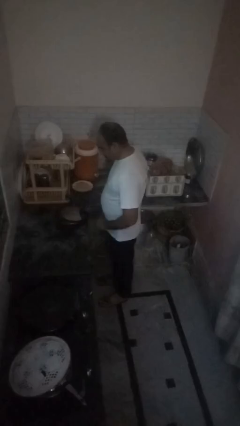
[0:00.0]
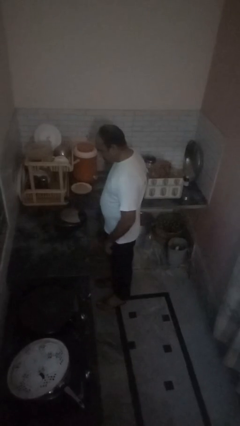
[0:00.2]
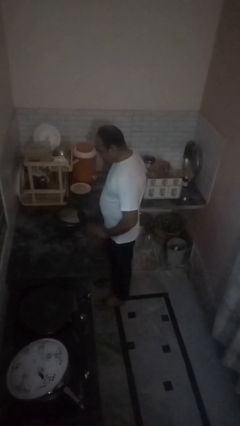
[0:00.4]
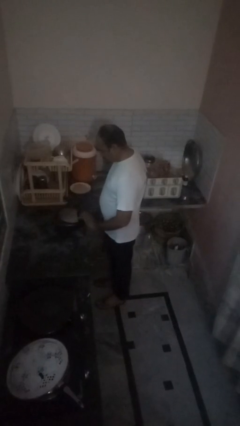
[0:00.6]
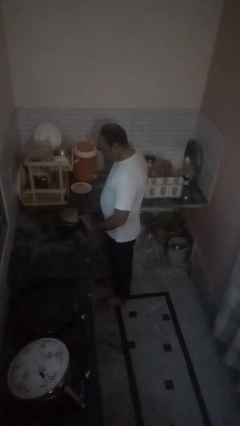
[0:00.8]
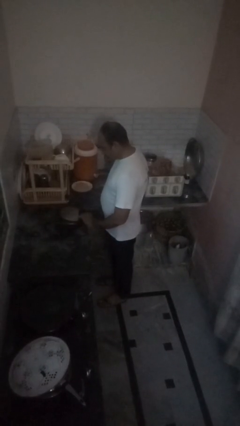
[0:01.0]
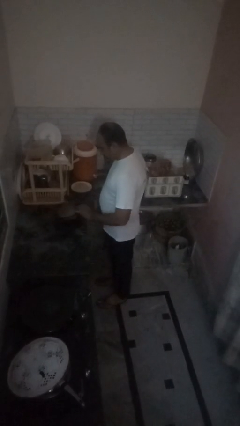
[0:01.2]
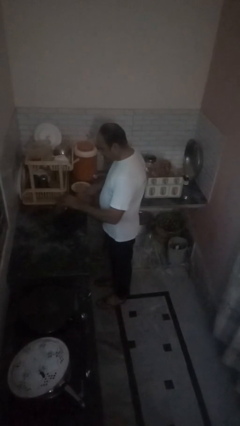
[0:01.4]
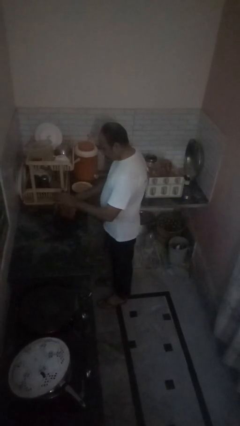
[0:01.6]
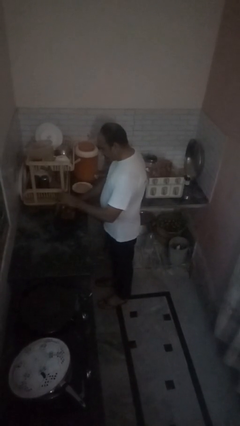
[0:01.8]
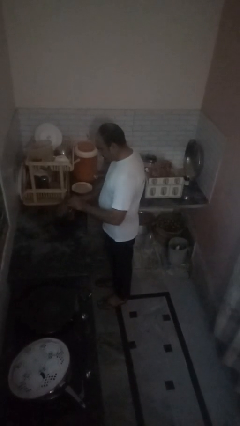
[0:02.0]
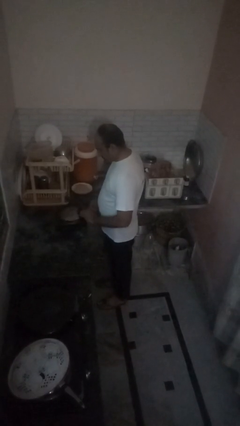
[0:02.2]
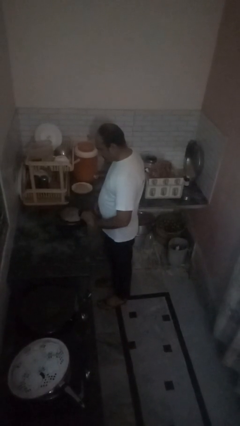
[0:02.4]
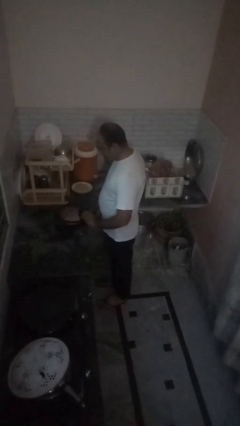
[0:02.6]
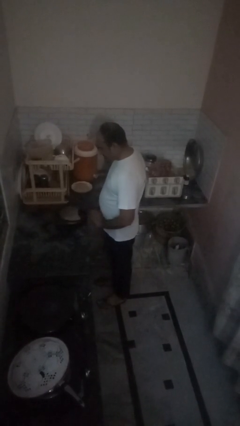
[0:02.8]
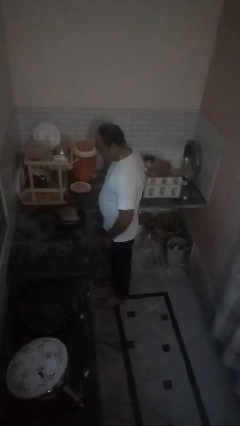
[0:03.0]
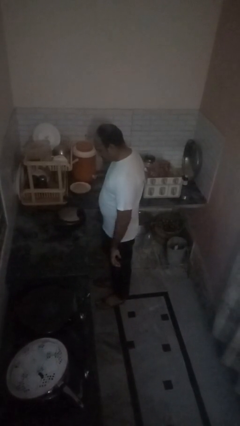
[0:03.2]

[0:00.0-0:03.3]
person puts object into toaster

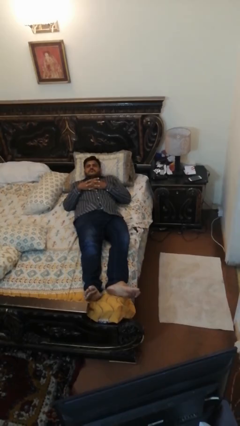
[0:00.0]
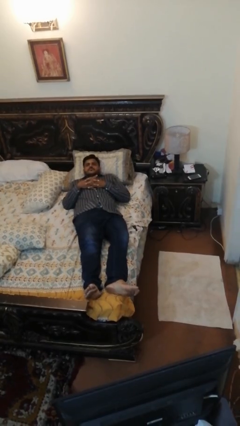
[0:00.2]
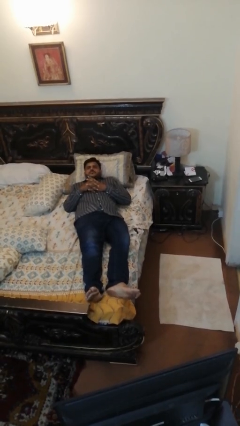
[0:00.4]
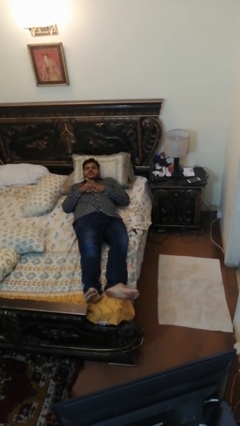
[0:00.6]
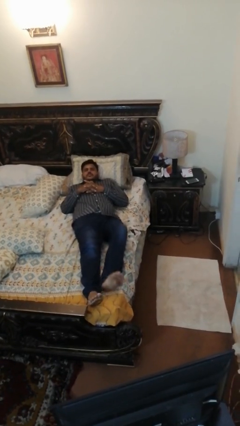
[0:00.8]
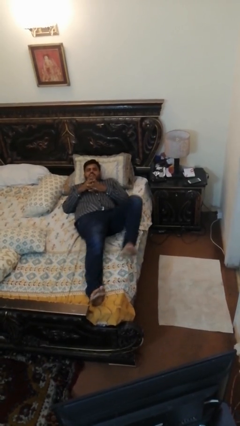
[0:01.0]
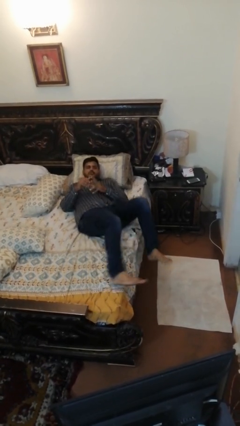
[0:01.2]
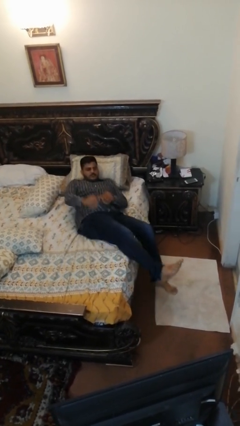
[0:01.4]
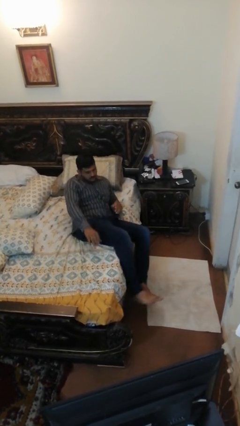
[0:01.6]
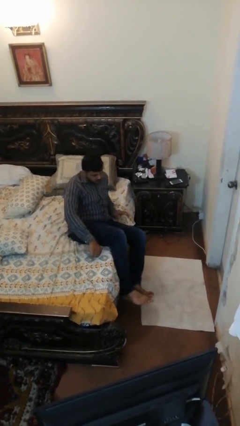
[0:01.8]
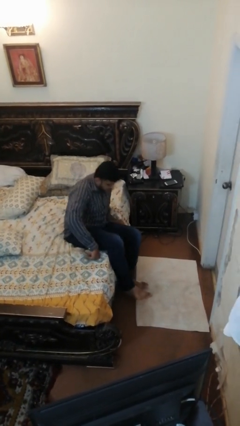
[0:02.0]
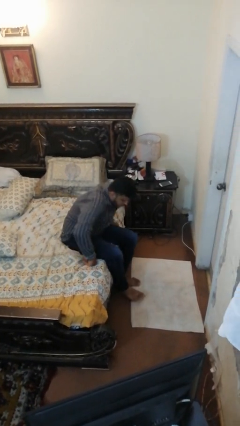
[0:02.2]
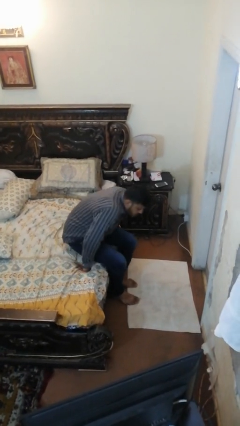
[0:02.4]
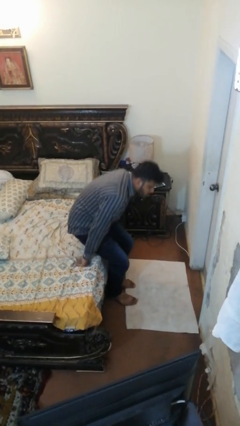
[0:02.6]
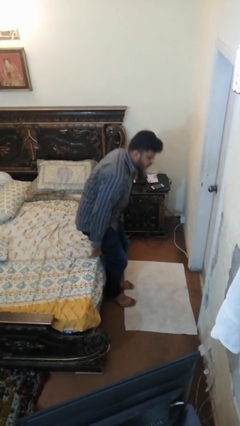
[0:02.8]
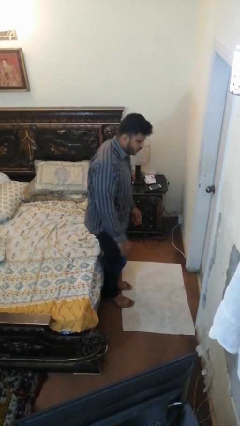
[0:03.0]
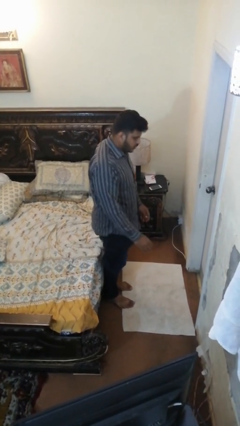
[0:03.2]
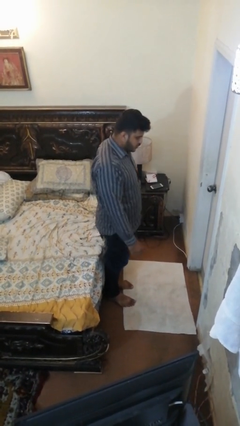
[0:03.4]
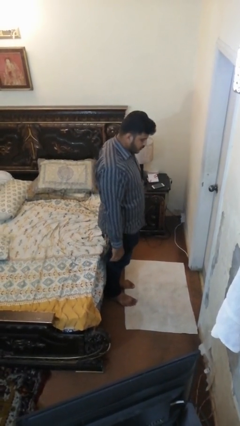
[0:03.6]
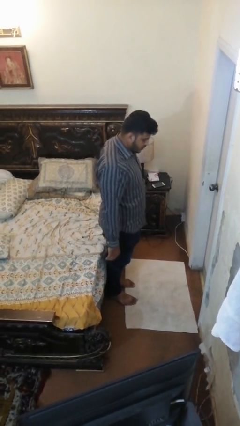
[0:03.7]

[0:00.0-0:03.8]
person stands up

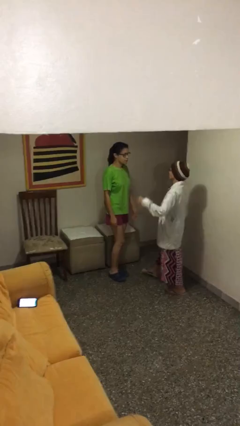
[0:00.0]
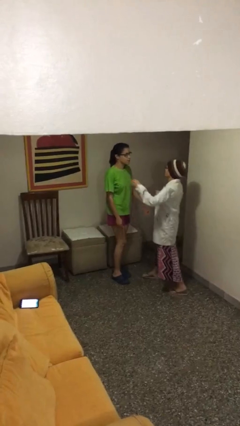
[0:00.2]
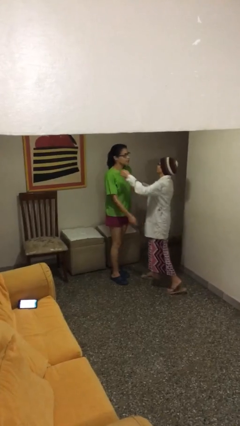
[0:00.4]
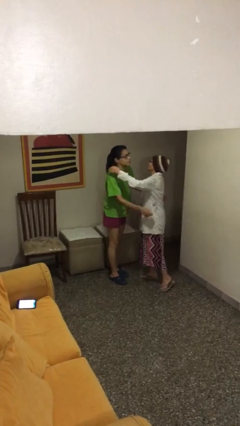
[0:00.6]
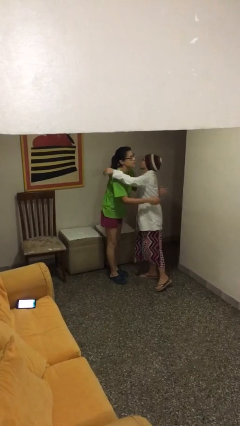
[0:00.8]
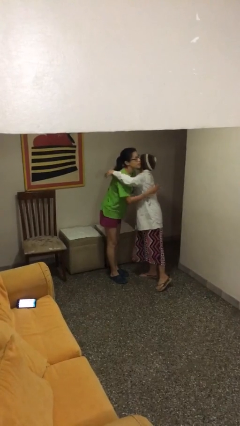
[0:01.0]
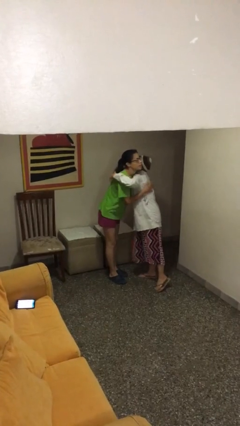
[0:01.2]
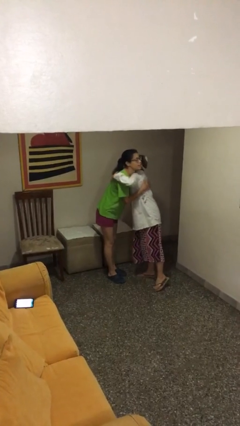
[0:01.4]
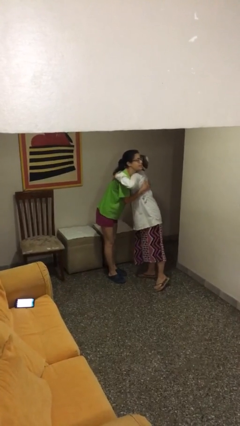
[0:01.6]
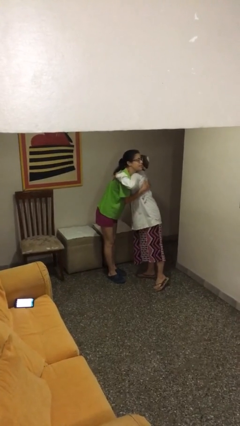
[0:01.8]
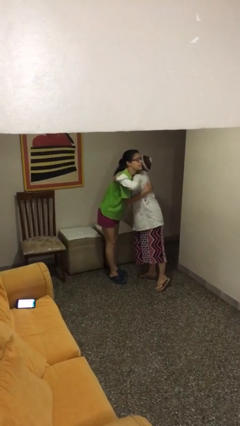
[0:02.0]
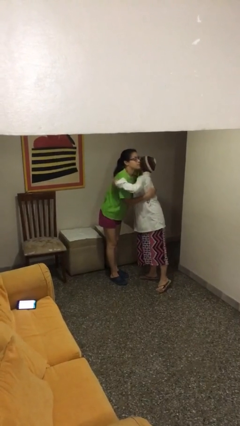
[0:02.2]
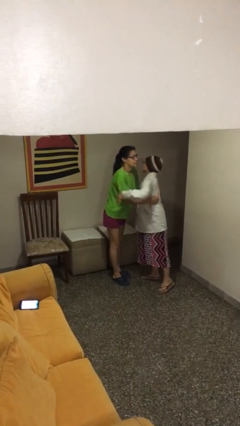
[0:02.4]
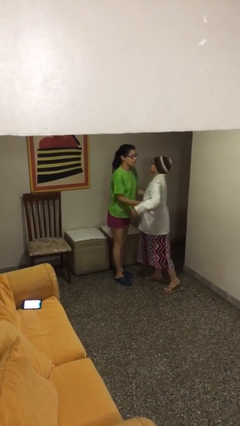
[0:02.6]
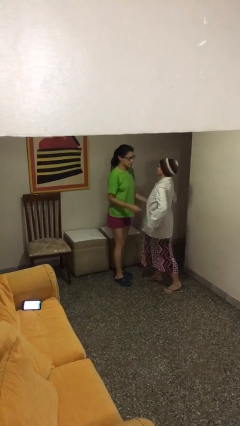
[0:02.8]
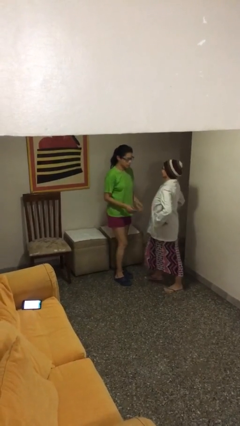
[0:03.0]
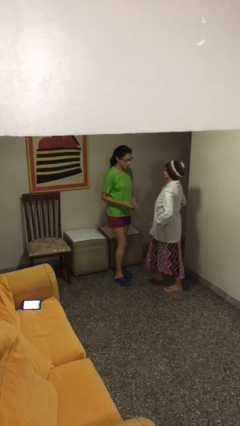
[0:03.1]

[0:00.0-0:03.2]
person embraces person

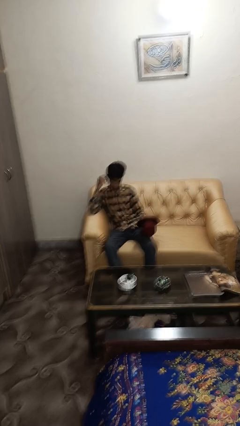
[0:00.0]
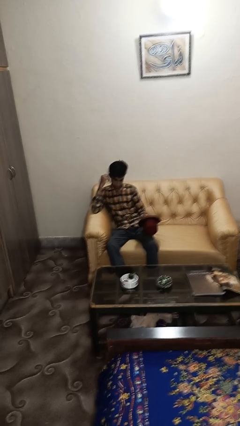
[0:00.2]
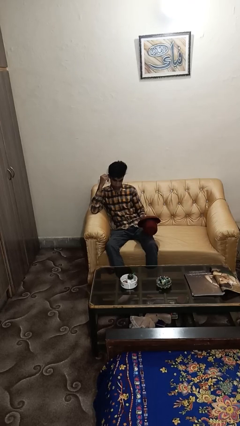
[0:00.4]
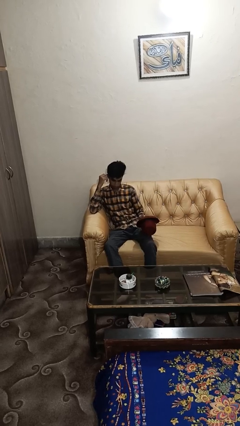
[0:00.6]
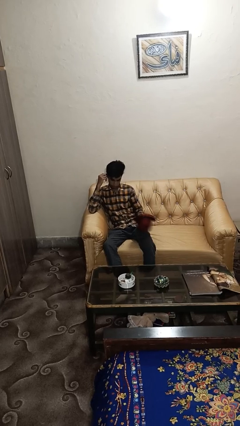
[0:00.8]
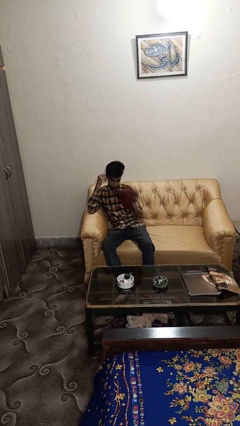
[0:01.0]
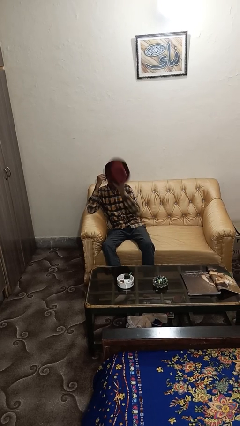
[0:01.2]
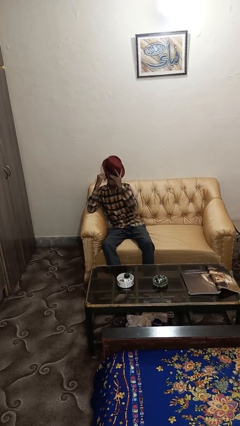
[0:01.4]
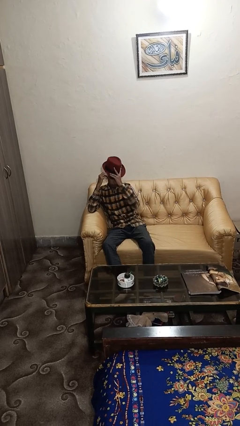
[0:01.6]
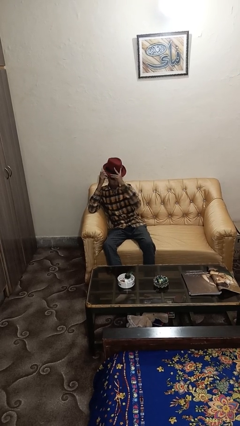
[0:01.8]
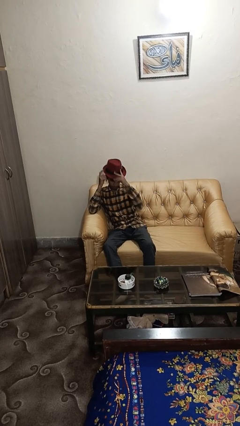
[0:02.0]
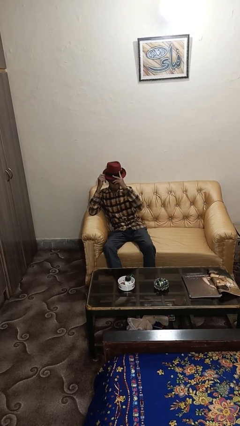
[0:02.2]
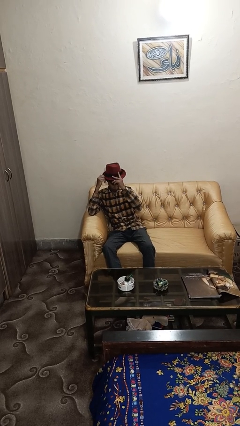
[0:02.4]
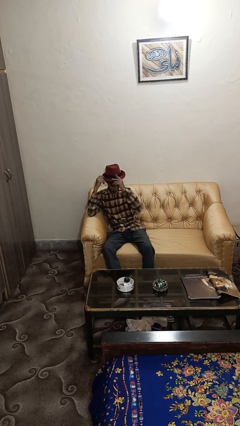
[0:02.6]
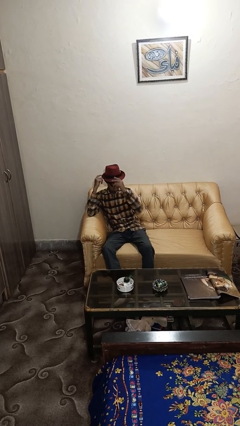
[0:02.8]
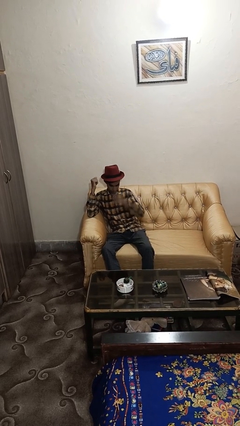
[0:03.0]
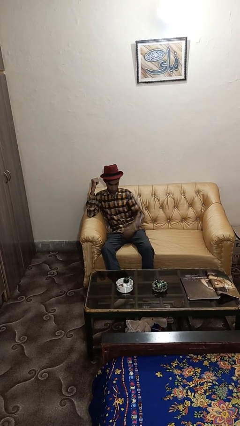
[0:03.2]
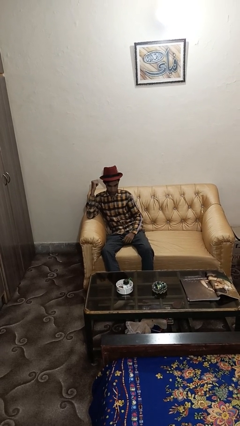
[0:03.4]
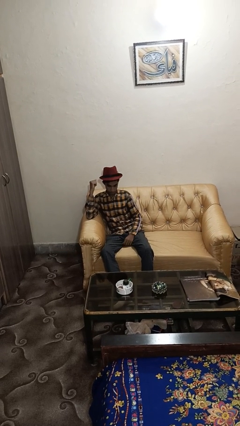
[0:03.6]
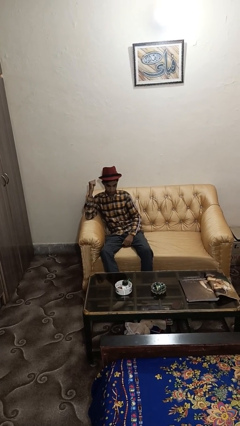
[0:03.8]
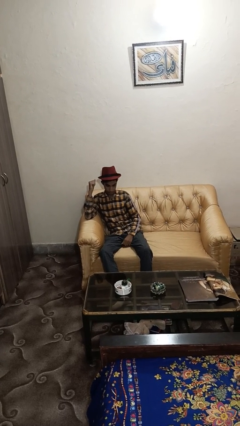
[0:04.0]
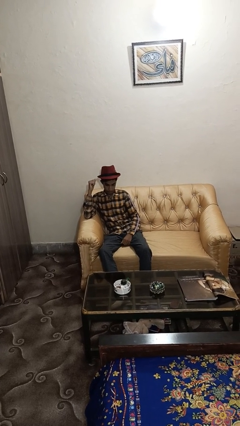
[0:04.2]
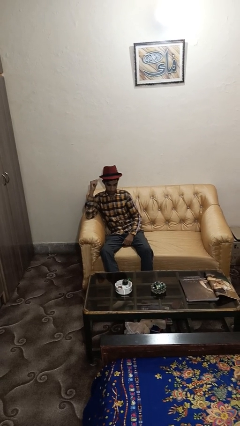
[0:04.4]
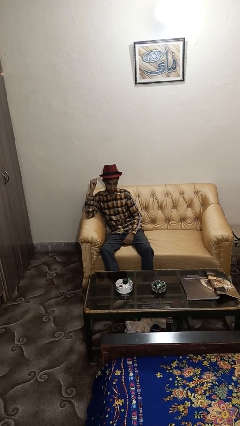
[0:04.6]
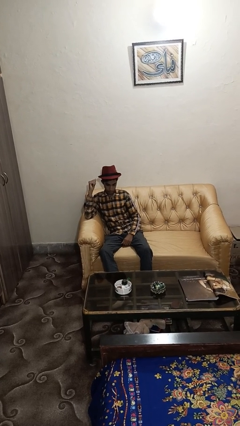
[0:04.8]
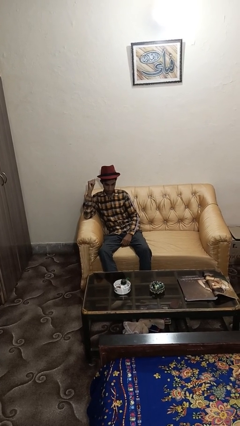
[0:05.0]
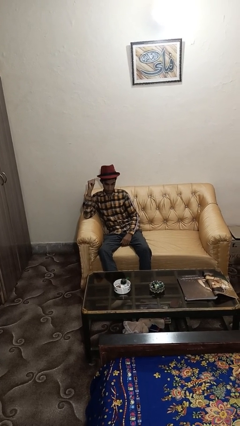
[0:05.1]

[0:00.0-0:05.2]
person puts on hat

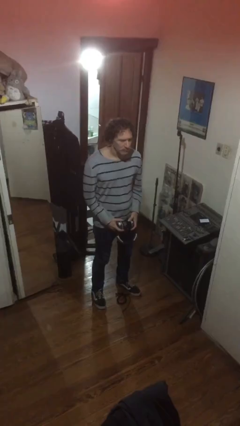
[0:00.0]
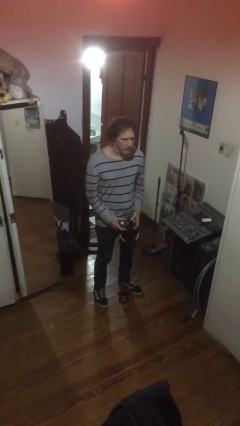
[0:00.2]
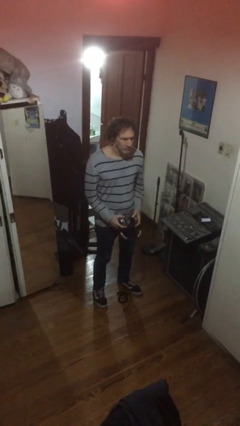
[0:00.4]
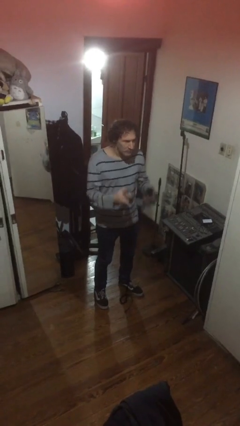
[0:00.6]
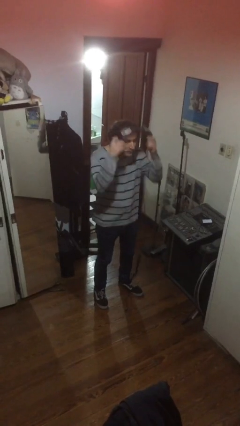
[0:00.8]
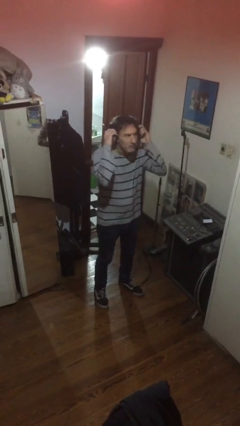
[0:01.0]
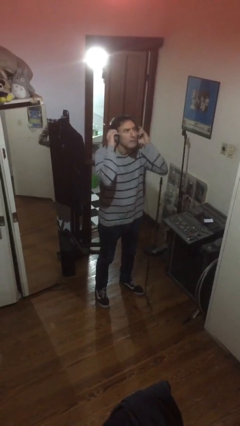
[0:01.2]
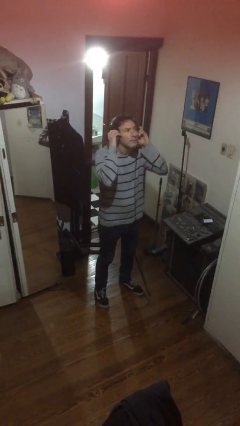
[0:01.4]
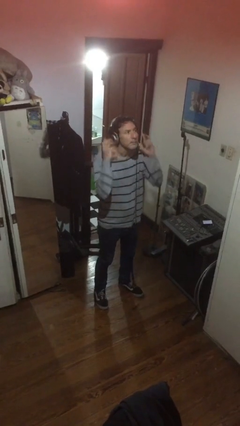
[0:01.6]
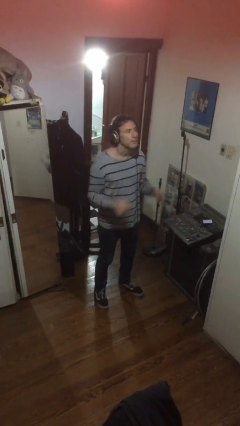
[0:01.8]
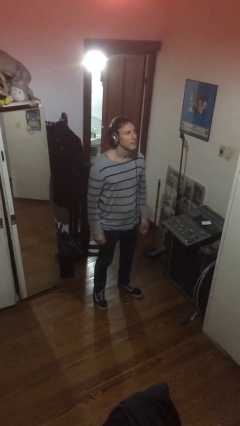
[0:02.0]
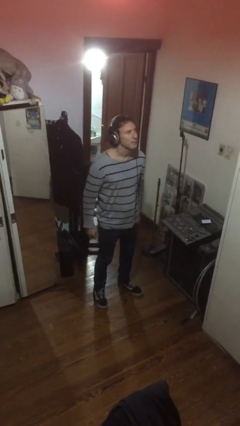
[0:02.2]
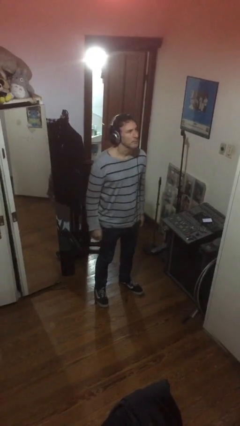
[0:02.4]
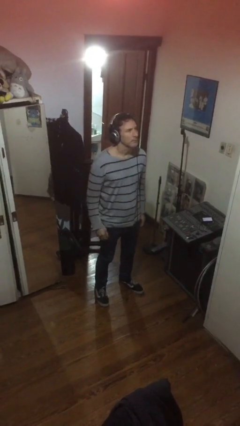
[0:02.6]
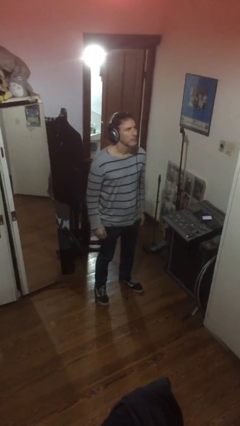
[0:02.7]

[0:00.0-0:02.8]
person puts on headphones
